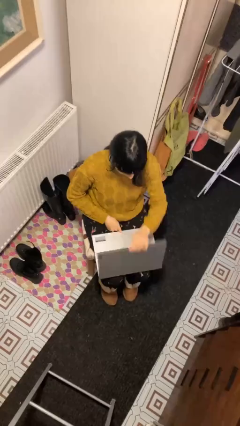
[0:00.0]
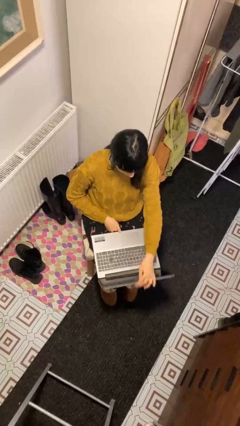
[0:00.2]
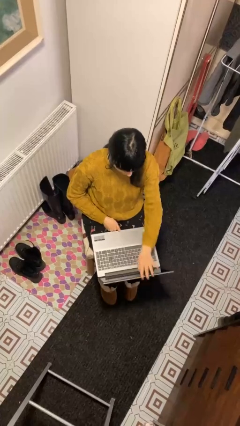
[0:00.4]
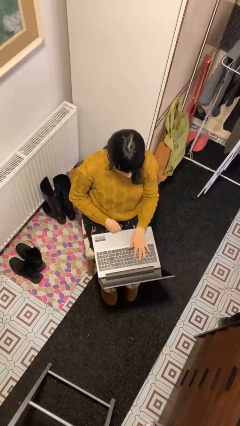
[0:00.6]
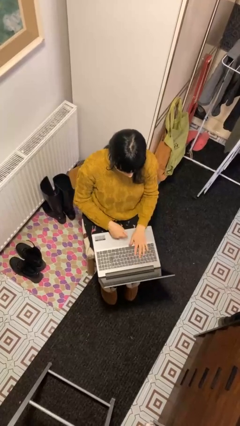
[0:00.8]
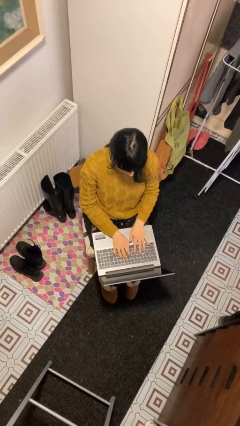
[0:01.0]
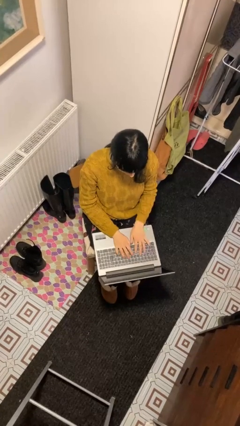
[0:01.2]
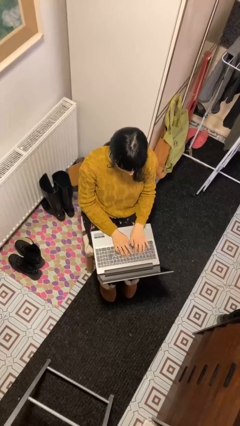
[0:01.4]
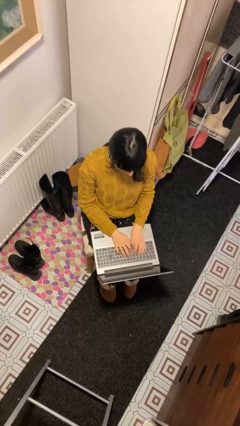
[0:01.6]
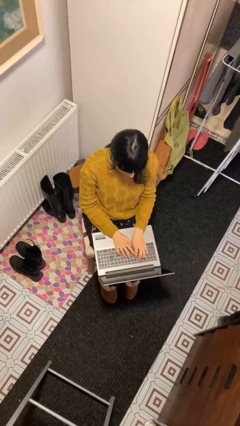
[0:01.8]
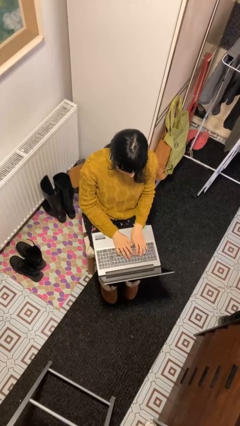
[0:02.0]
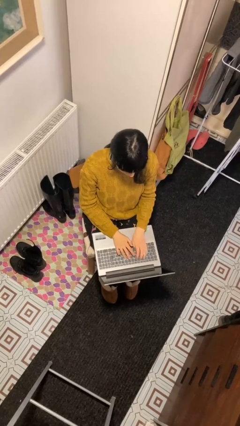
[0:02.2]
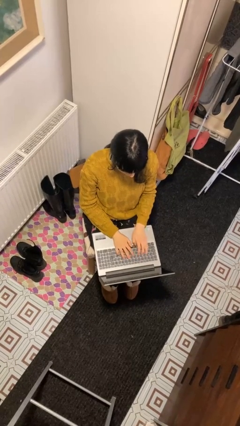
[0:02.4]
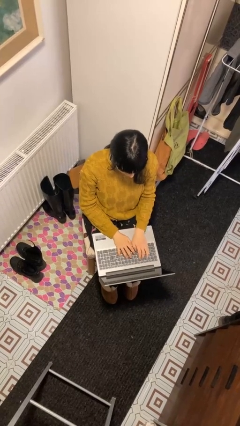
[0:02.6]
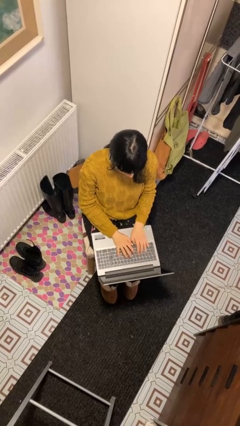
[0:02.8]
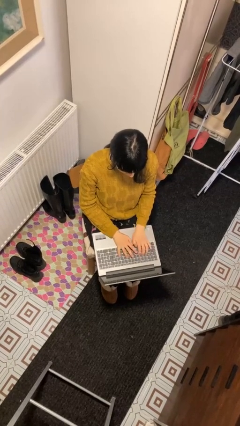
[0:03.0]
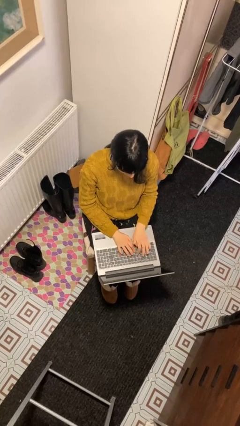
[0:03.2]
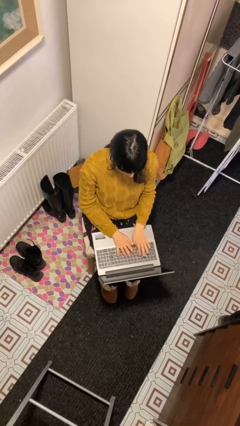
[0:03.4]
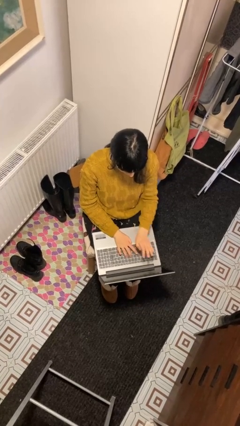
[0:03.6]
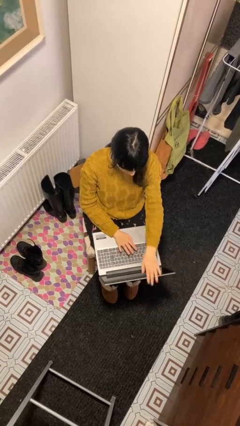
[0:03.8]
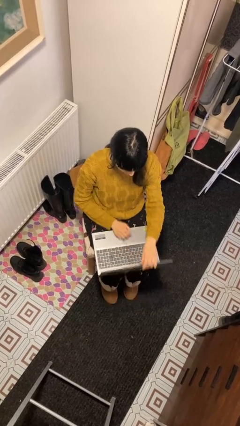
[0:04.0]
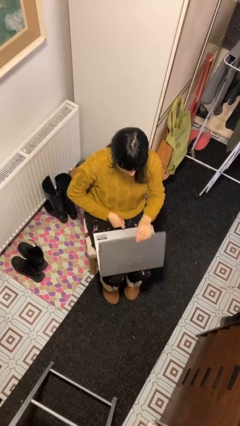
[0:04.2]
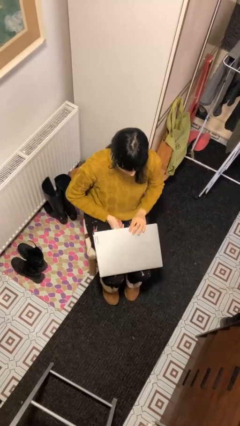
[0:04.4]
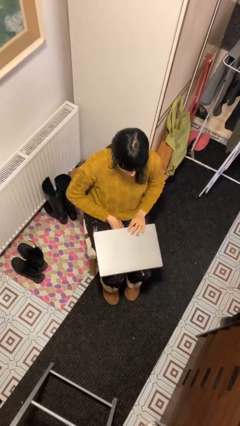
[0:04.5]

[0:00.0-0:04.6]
person interacts with laptop

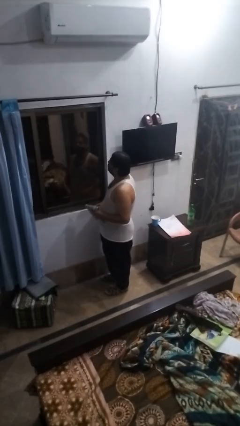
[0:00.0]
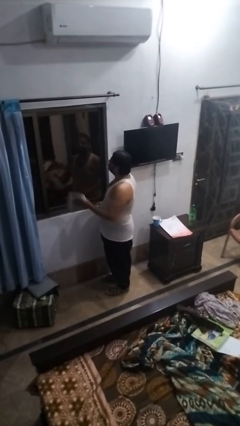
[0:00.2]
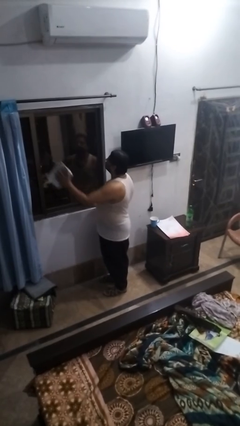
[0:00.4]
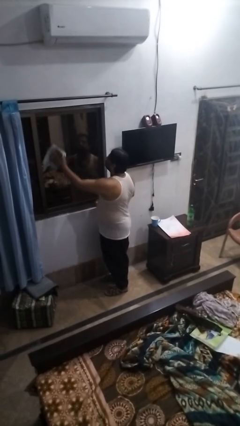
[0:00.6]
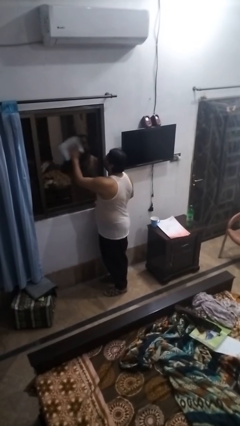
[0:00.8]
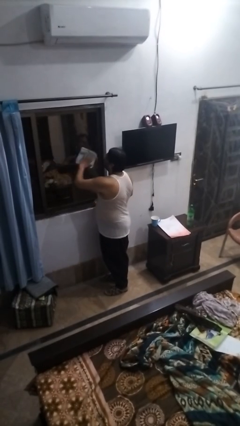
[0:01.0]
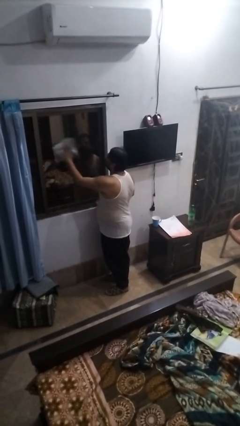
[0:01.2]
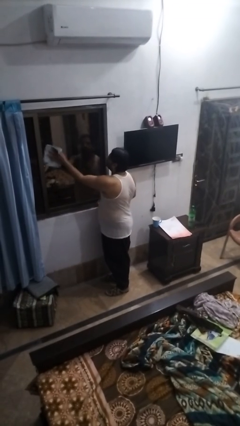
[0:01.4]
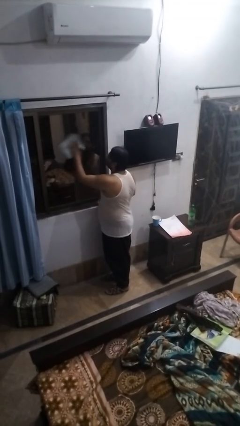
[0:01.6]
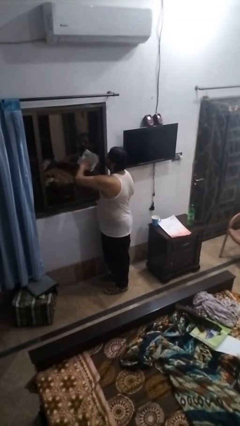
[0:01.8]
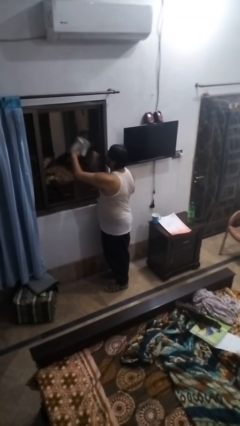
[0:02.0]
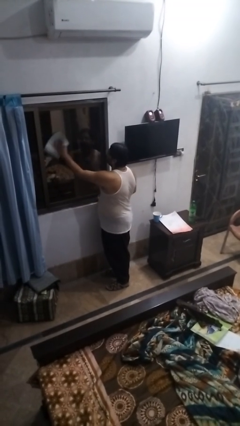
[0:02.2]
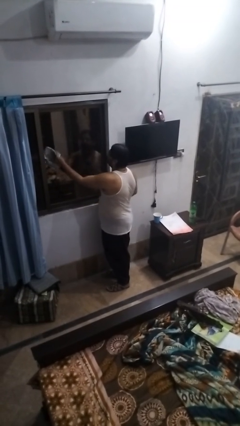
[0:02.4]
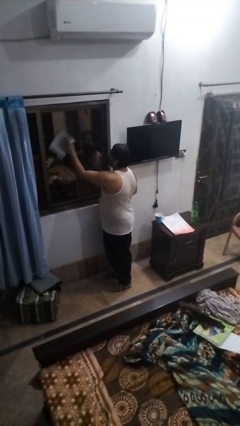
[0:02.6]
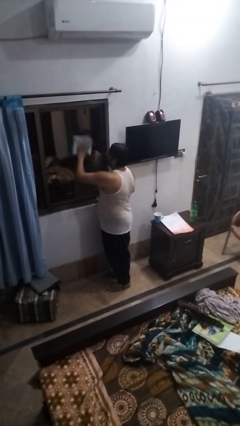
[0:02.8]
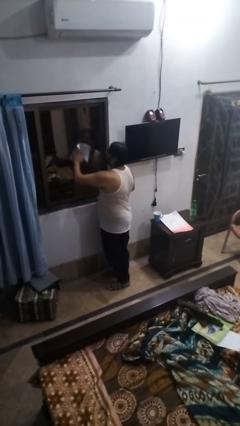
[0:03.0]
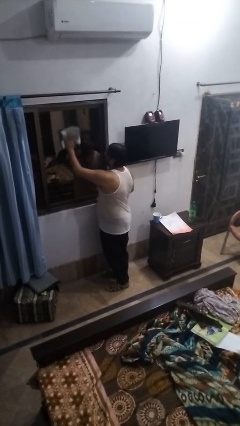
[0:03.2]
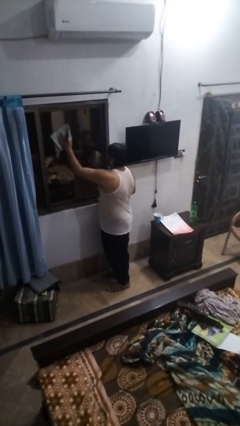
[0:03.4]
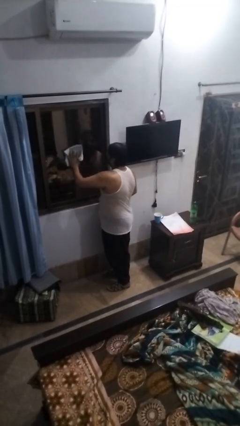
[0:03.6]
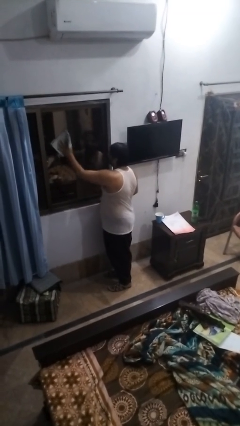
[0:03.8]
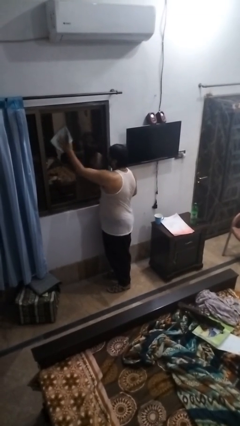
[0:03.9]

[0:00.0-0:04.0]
person washes window

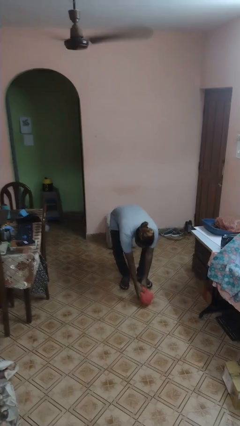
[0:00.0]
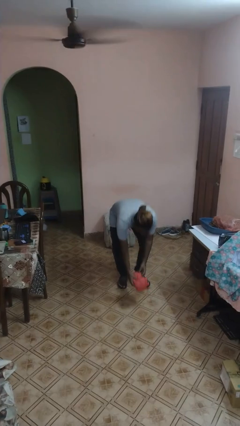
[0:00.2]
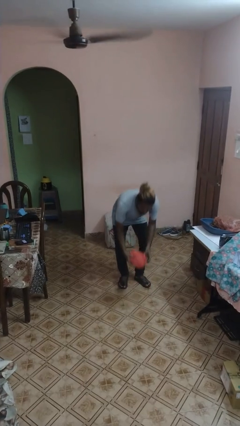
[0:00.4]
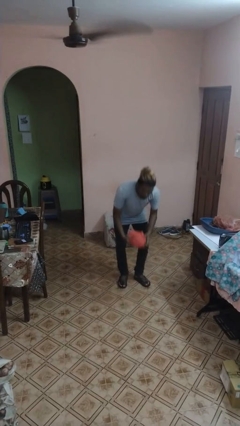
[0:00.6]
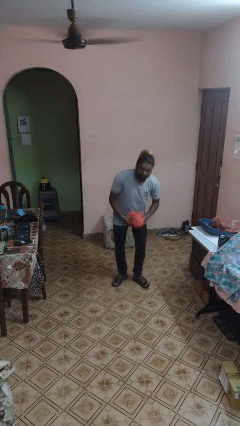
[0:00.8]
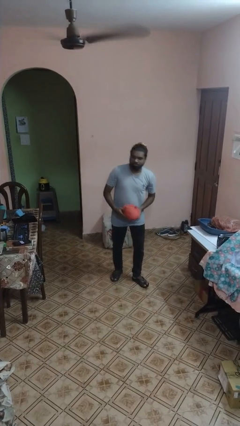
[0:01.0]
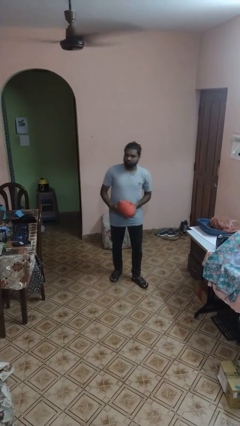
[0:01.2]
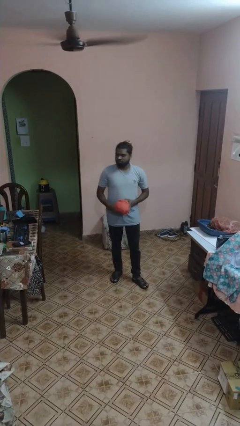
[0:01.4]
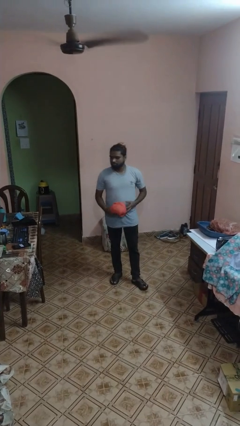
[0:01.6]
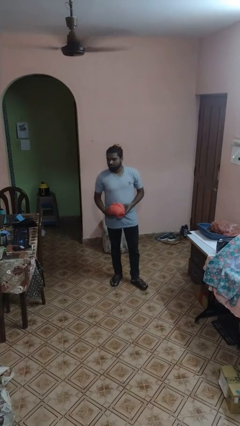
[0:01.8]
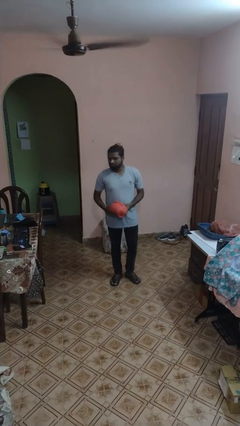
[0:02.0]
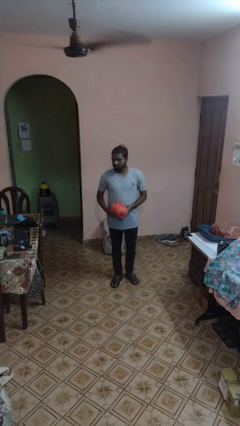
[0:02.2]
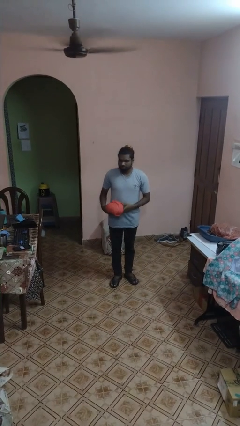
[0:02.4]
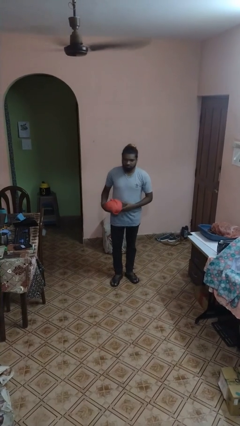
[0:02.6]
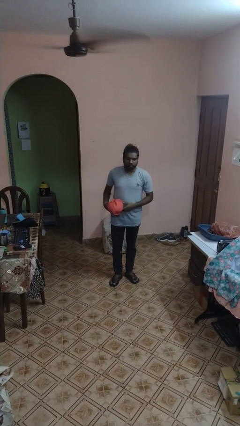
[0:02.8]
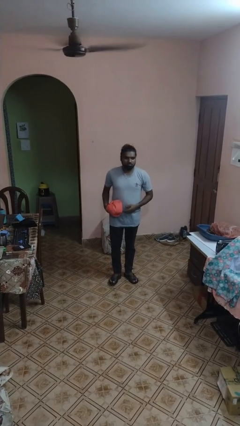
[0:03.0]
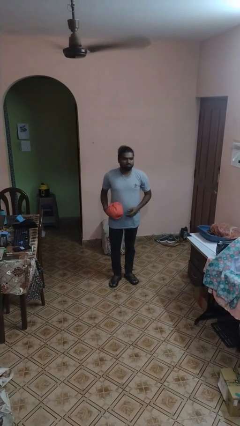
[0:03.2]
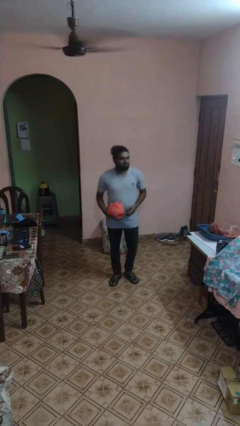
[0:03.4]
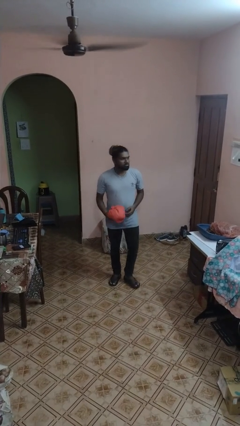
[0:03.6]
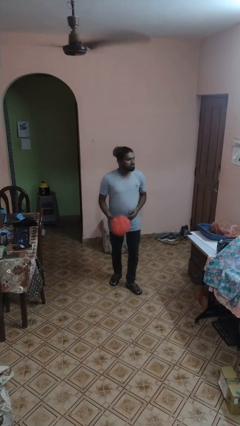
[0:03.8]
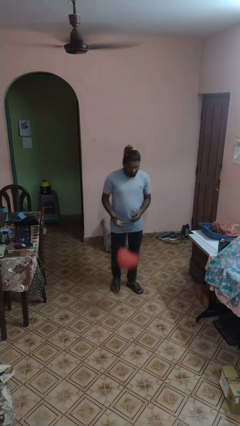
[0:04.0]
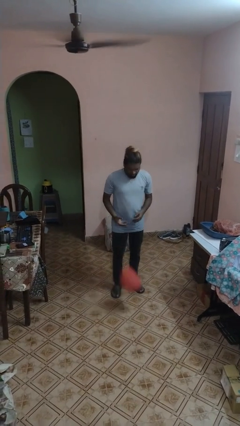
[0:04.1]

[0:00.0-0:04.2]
person picks up object from floor

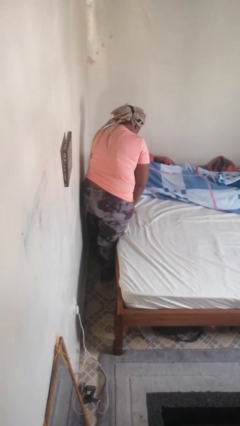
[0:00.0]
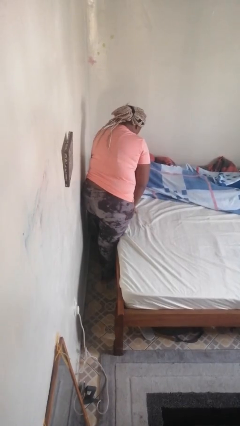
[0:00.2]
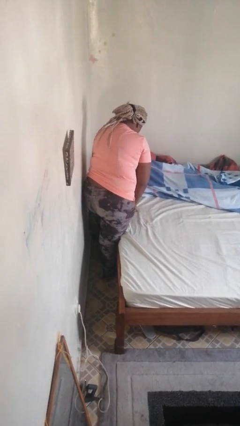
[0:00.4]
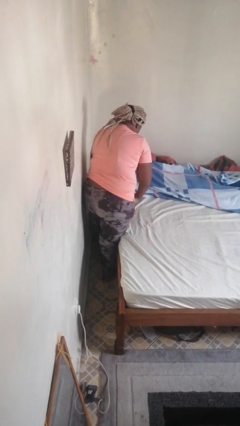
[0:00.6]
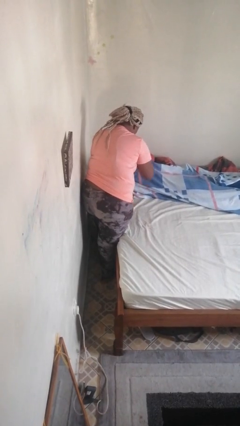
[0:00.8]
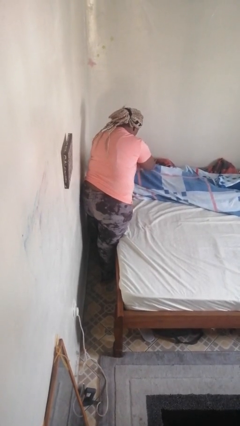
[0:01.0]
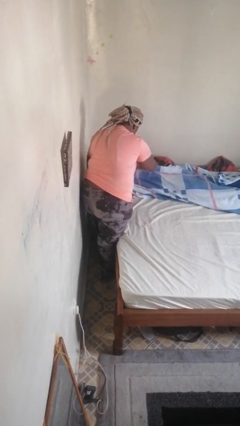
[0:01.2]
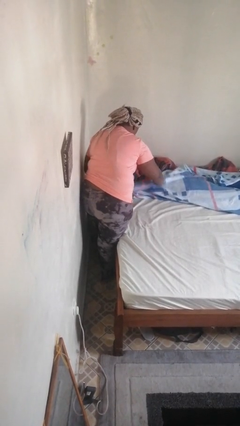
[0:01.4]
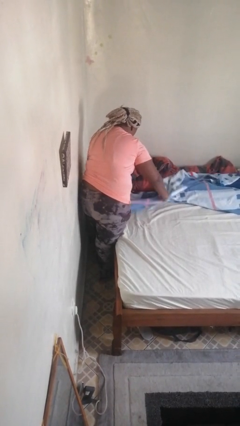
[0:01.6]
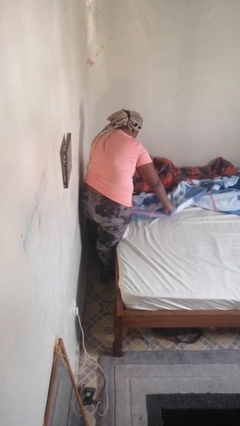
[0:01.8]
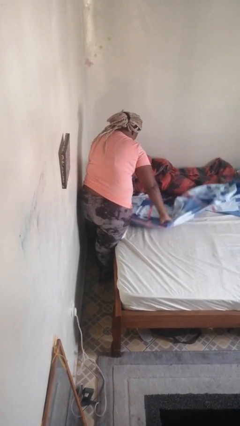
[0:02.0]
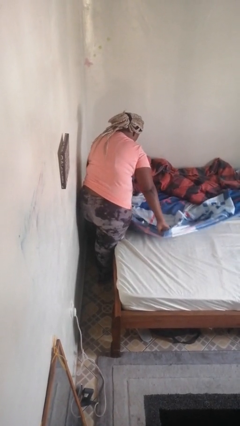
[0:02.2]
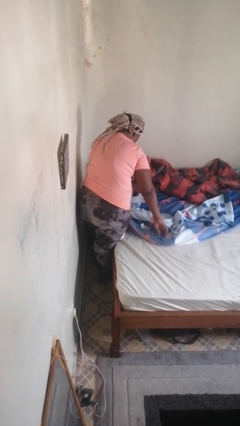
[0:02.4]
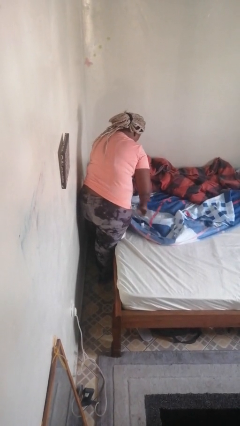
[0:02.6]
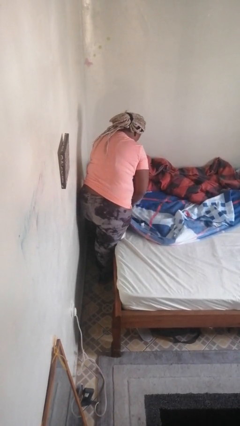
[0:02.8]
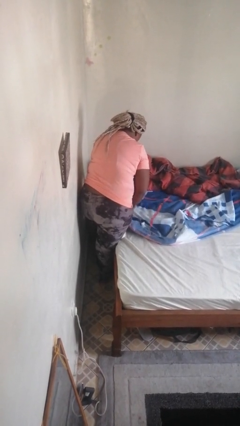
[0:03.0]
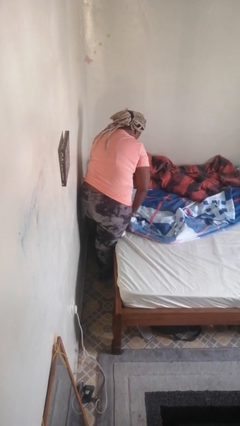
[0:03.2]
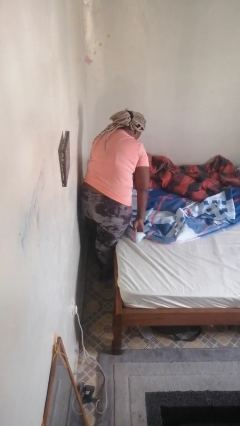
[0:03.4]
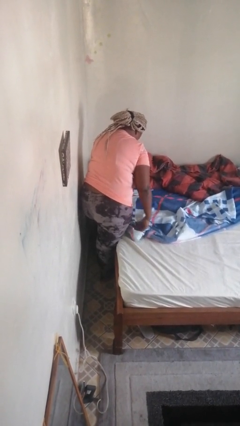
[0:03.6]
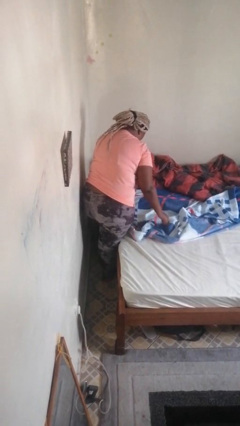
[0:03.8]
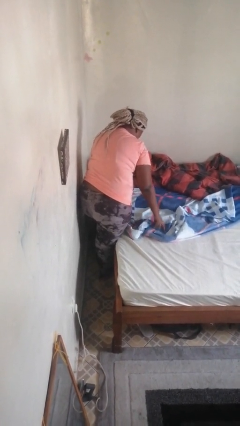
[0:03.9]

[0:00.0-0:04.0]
person makes bed

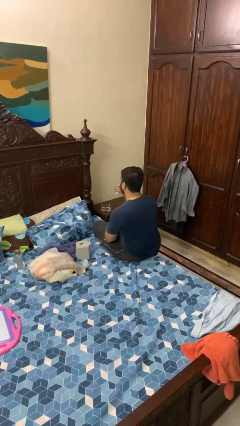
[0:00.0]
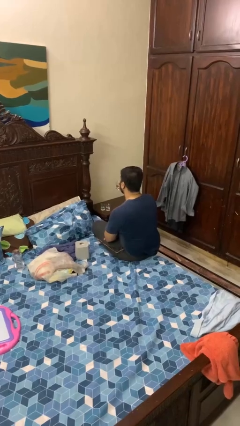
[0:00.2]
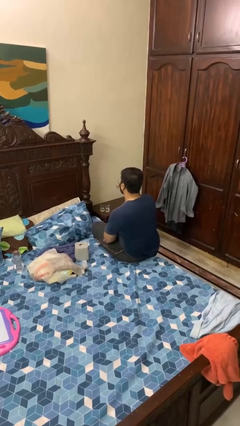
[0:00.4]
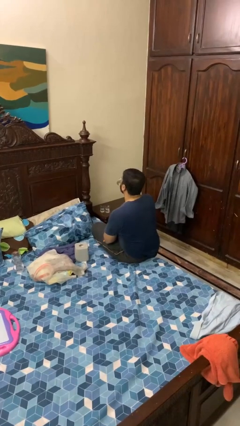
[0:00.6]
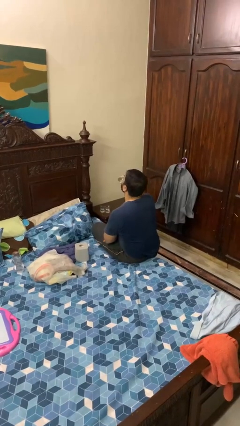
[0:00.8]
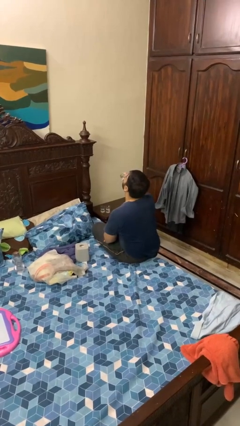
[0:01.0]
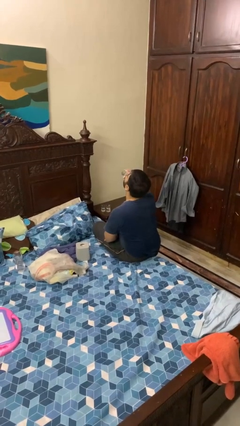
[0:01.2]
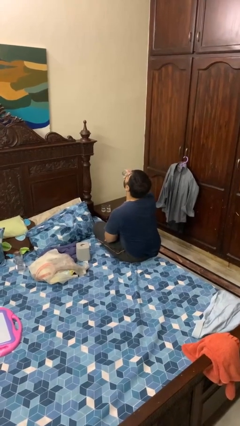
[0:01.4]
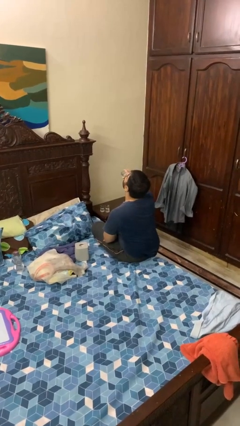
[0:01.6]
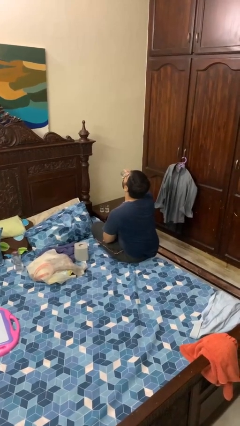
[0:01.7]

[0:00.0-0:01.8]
person drinks from shotglass
